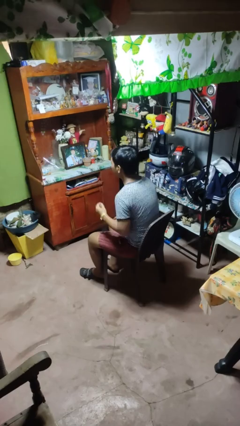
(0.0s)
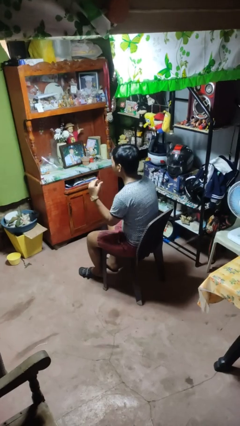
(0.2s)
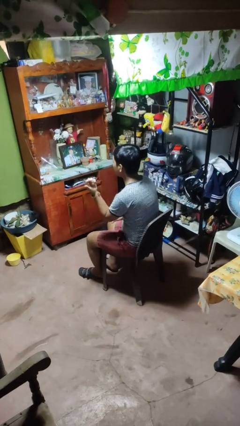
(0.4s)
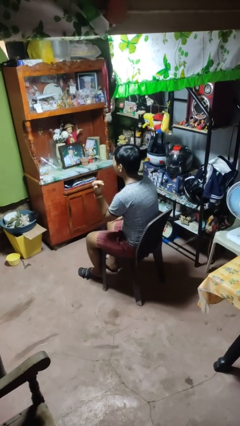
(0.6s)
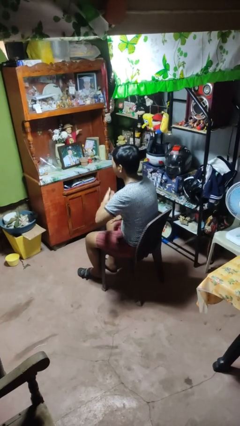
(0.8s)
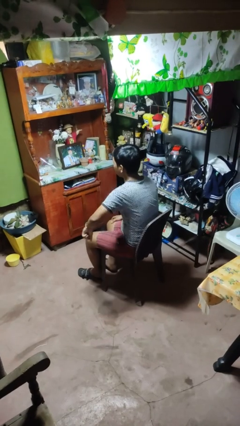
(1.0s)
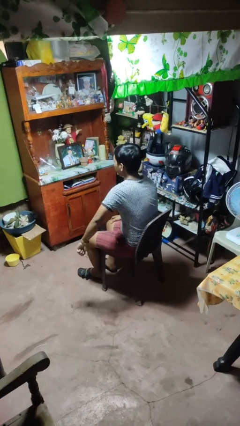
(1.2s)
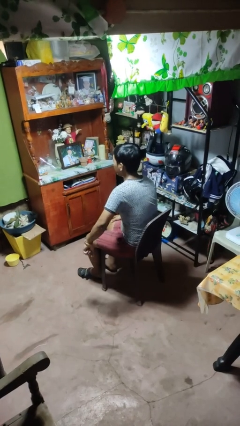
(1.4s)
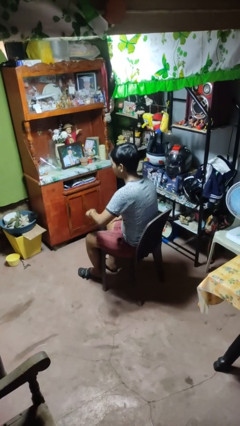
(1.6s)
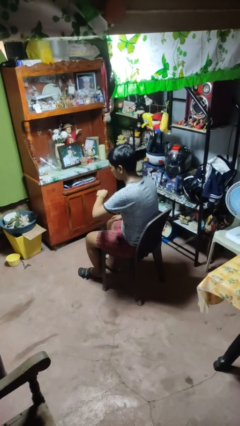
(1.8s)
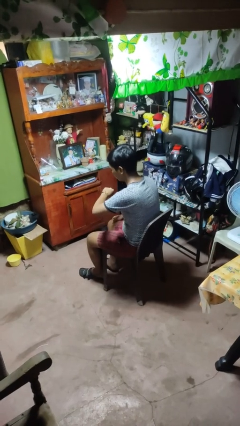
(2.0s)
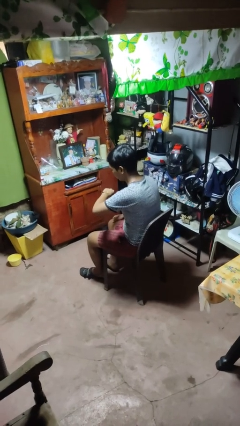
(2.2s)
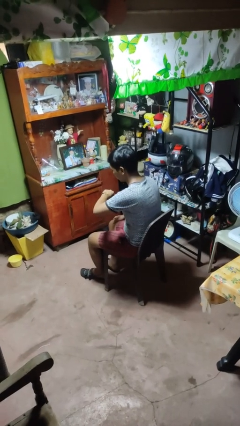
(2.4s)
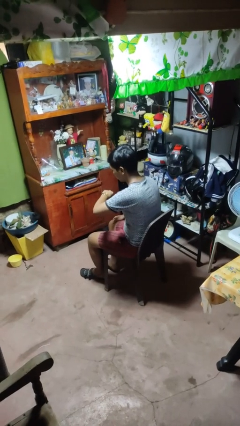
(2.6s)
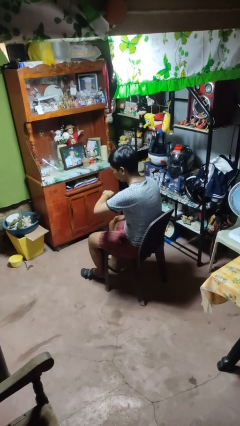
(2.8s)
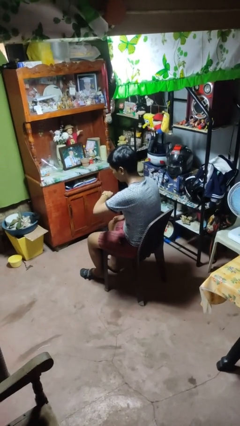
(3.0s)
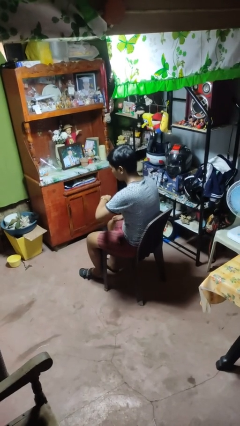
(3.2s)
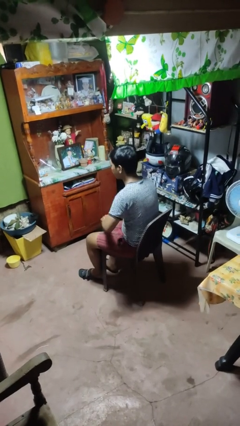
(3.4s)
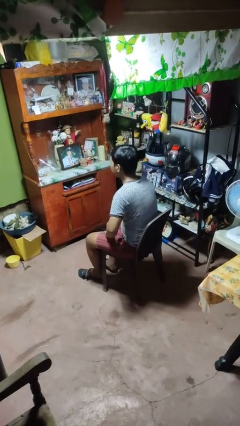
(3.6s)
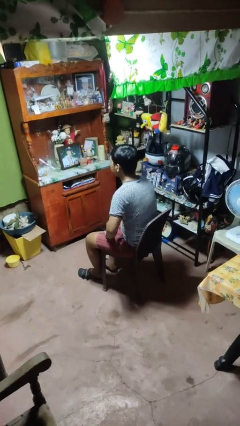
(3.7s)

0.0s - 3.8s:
person looks at wristwatch

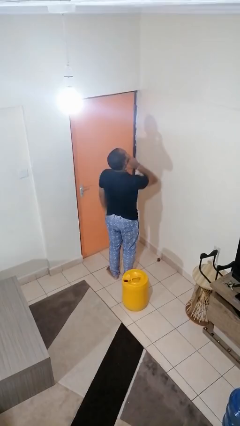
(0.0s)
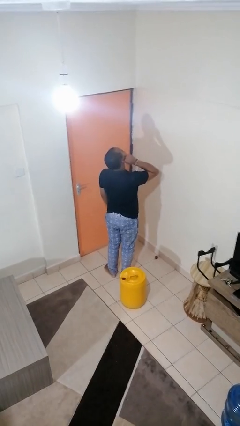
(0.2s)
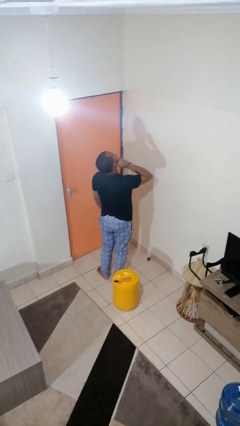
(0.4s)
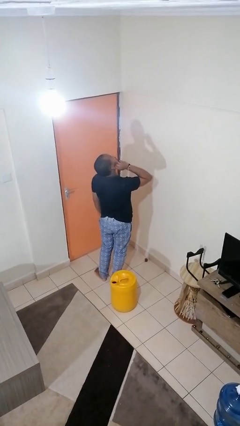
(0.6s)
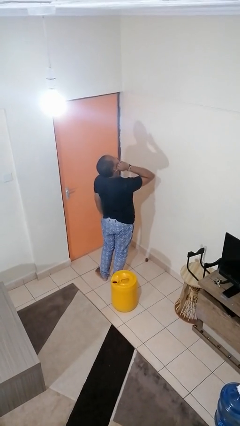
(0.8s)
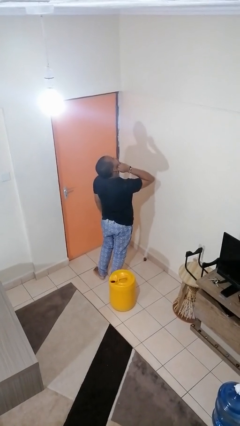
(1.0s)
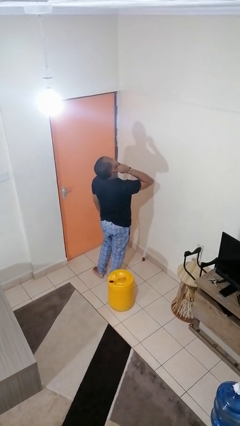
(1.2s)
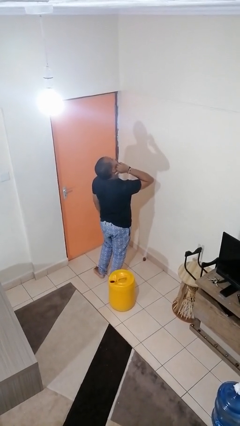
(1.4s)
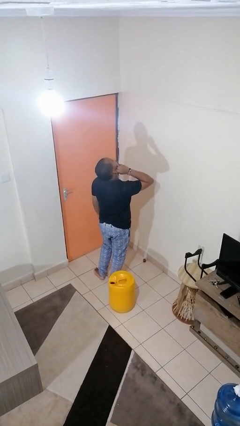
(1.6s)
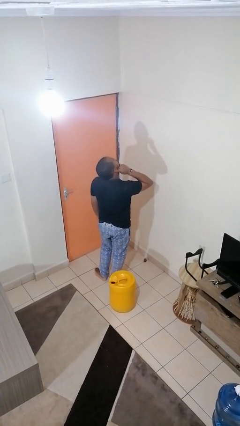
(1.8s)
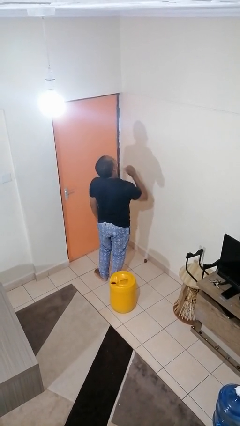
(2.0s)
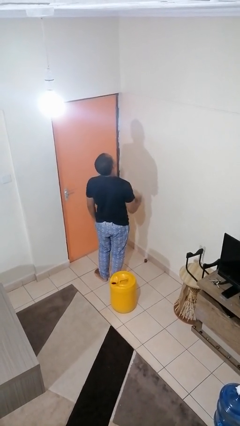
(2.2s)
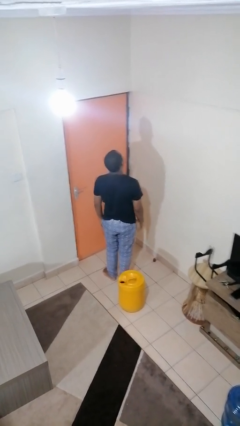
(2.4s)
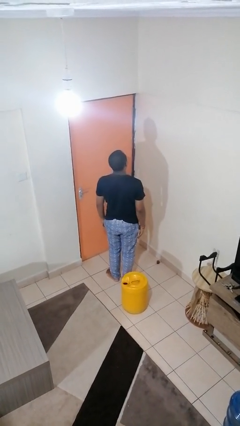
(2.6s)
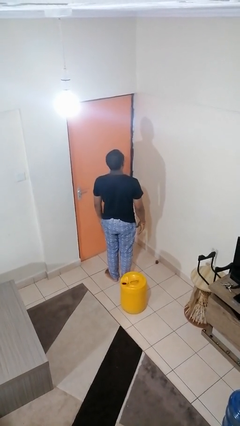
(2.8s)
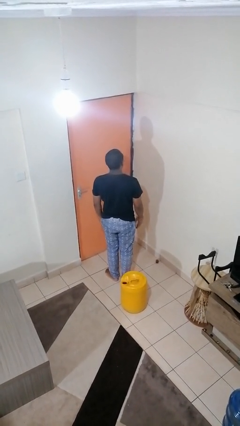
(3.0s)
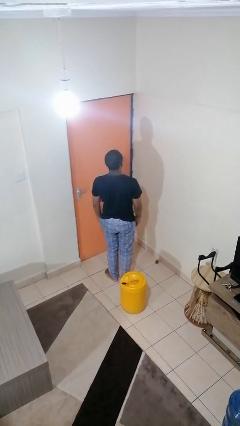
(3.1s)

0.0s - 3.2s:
person touches earlobe

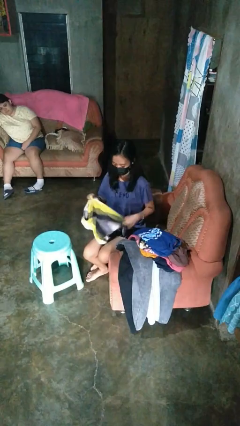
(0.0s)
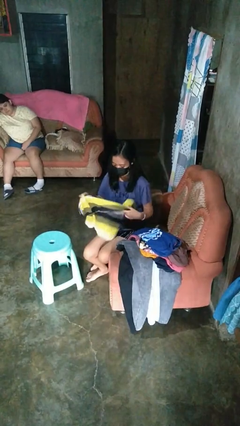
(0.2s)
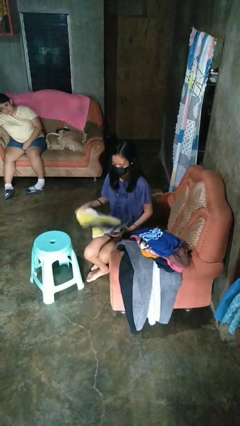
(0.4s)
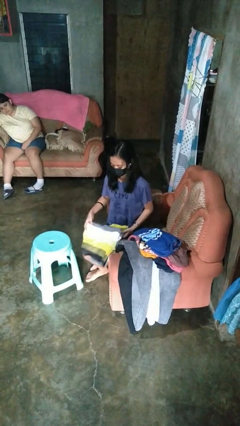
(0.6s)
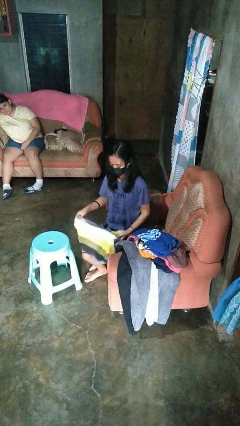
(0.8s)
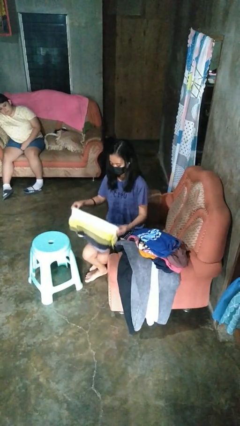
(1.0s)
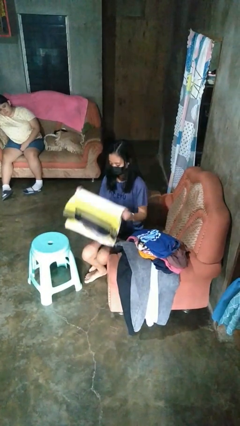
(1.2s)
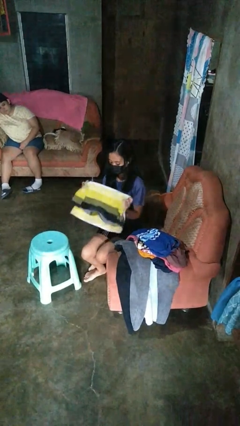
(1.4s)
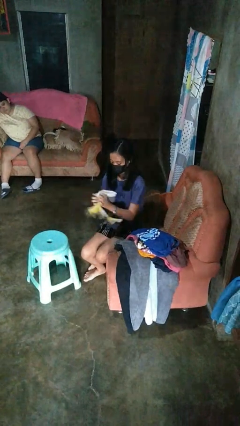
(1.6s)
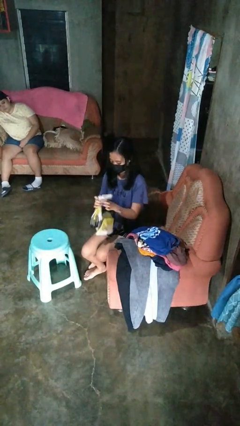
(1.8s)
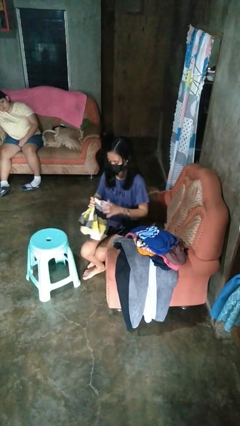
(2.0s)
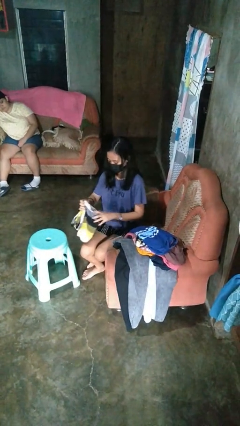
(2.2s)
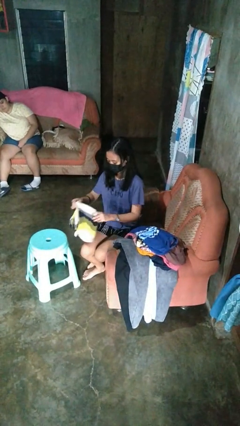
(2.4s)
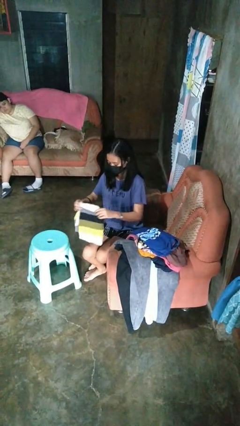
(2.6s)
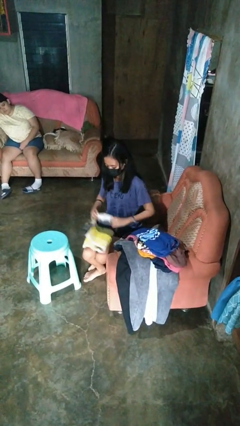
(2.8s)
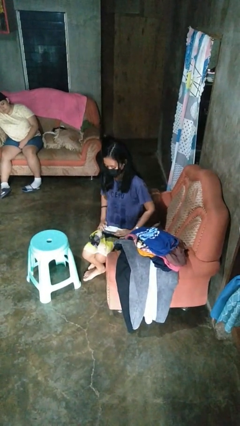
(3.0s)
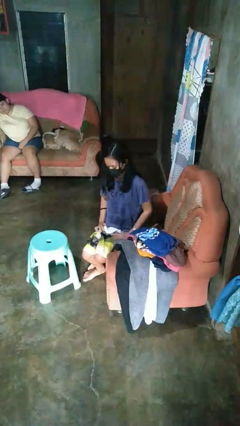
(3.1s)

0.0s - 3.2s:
person folds shirt

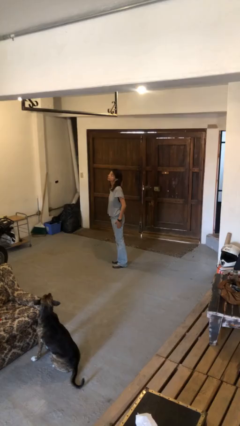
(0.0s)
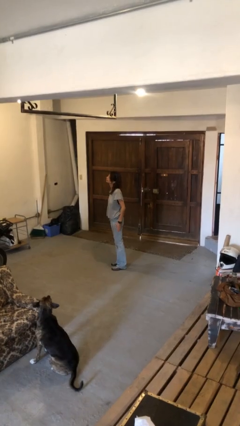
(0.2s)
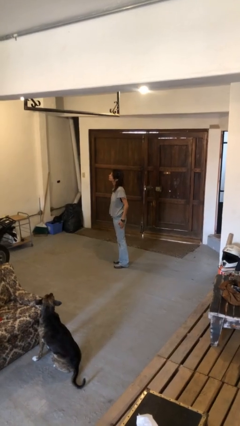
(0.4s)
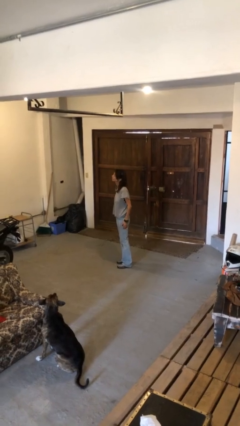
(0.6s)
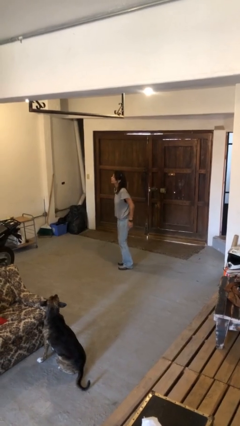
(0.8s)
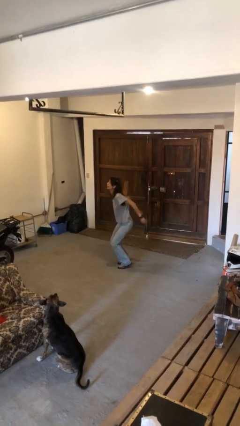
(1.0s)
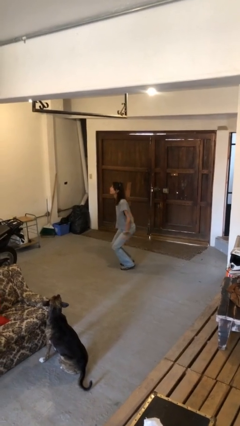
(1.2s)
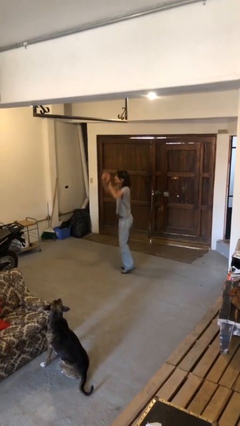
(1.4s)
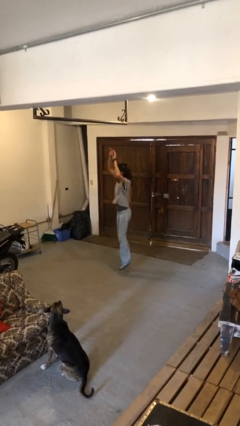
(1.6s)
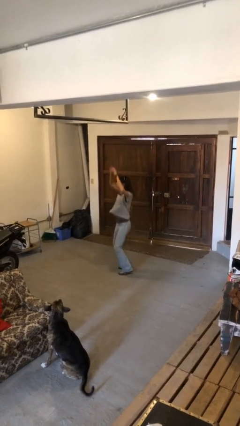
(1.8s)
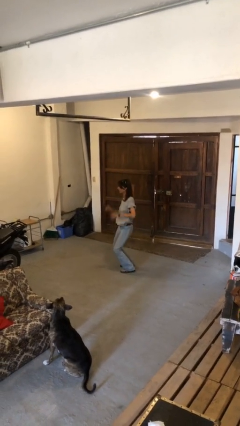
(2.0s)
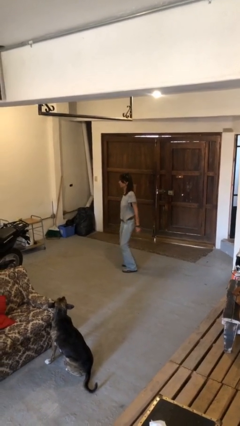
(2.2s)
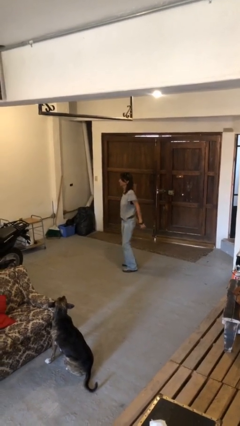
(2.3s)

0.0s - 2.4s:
person jumps

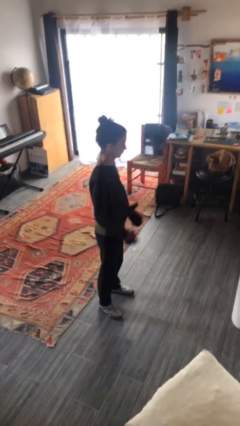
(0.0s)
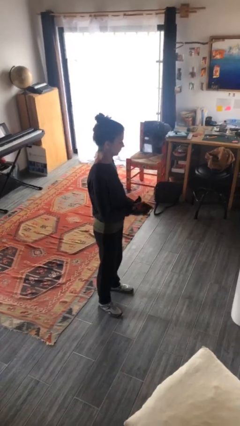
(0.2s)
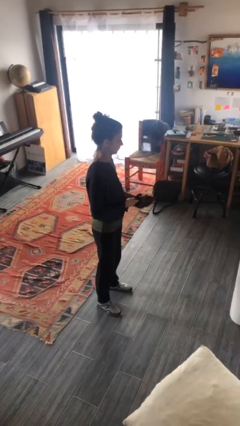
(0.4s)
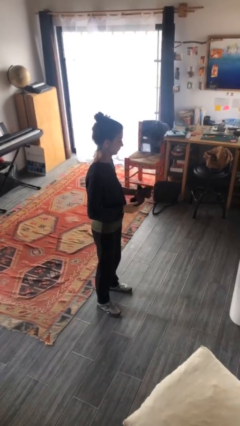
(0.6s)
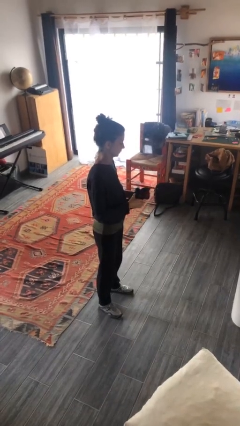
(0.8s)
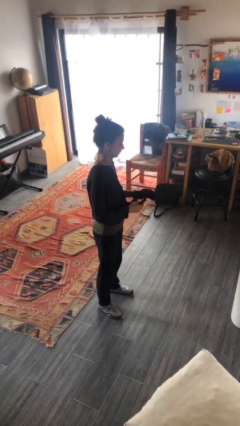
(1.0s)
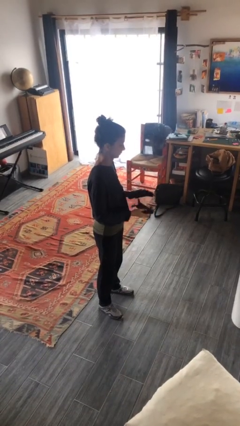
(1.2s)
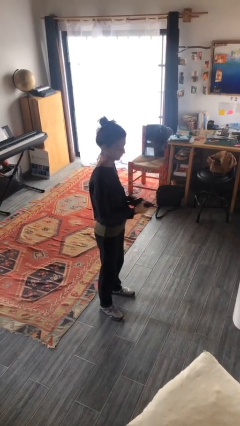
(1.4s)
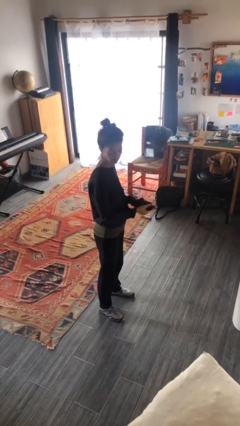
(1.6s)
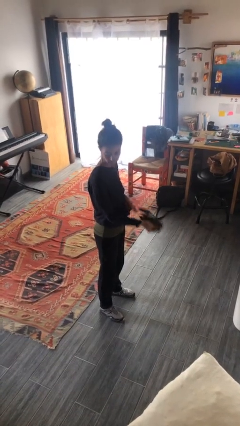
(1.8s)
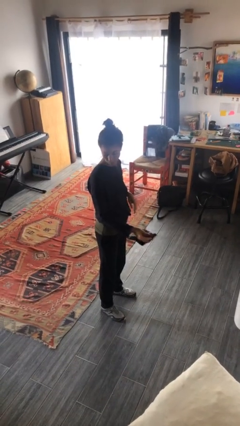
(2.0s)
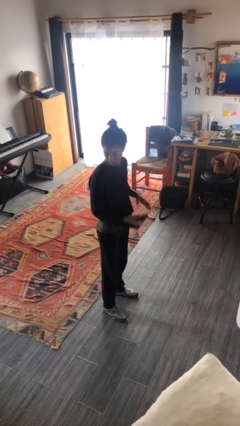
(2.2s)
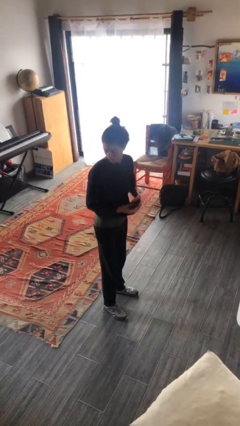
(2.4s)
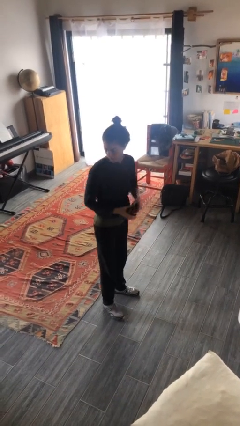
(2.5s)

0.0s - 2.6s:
person takes off gloves

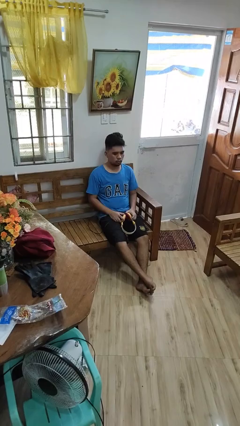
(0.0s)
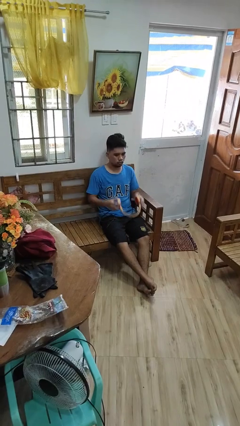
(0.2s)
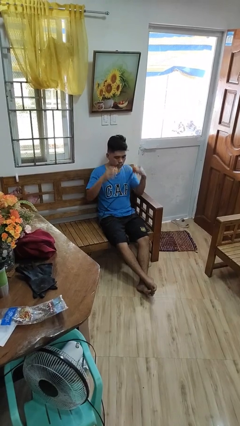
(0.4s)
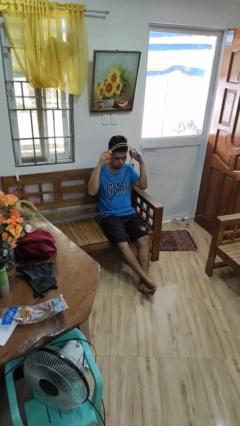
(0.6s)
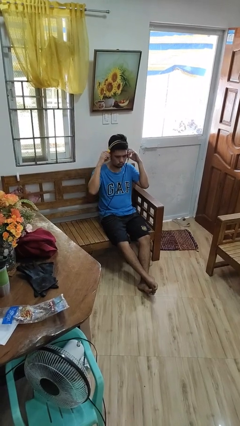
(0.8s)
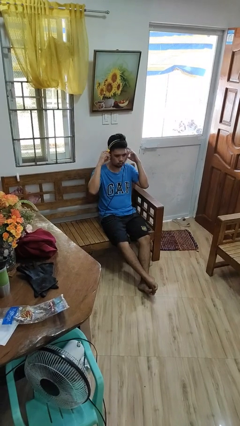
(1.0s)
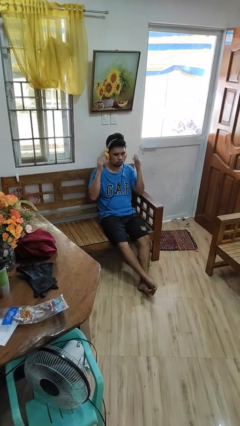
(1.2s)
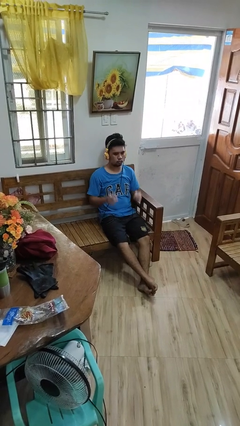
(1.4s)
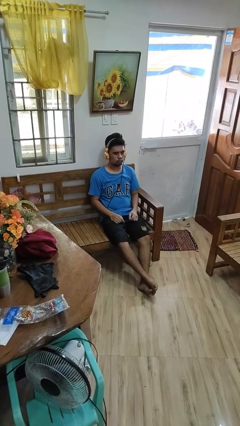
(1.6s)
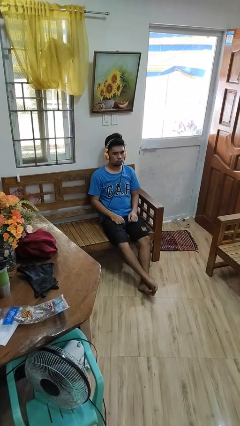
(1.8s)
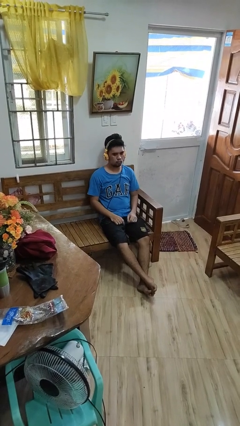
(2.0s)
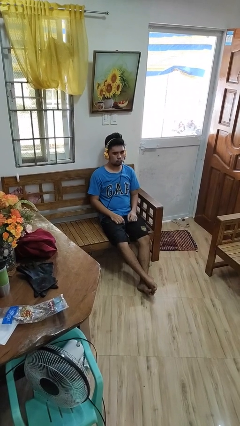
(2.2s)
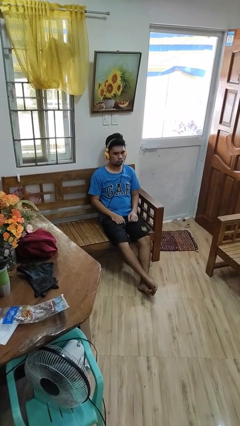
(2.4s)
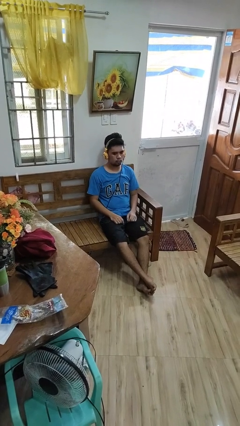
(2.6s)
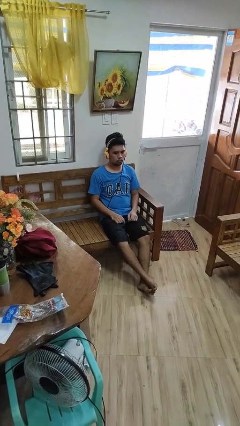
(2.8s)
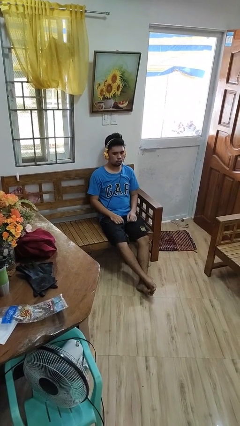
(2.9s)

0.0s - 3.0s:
person puts on headphones
